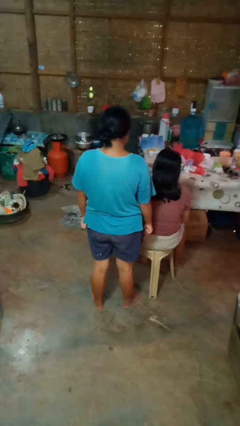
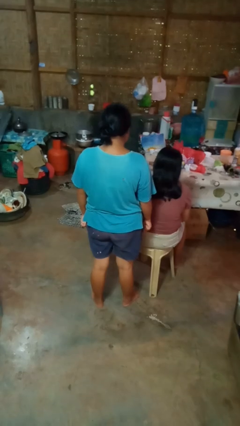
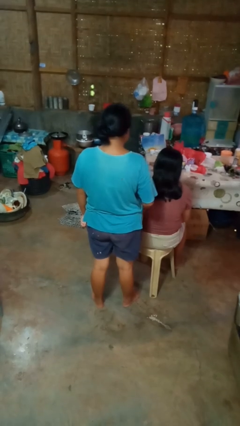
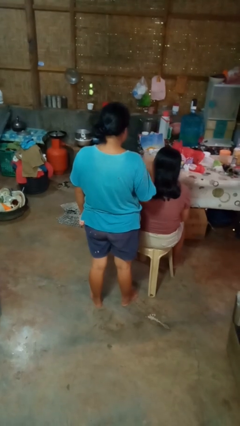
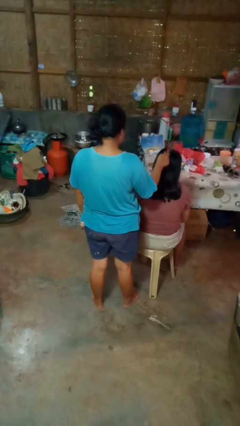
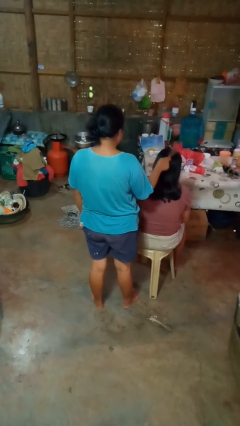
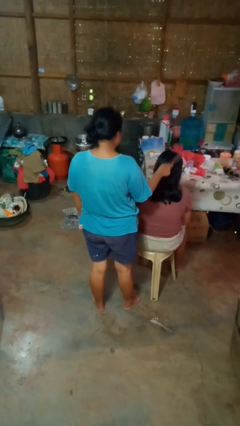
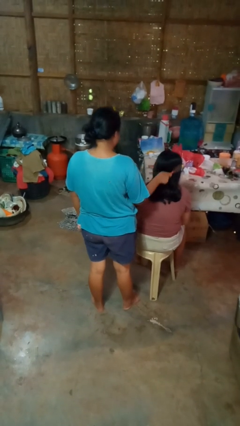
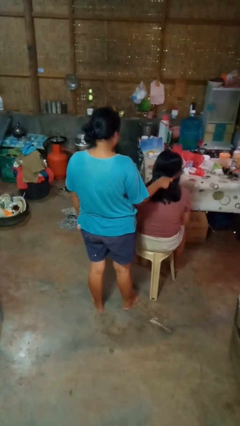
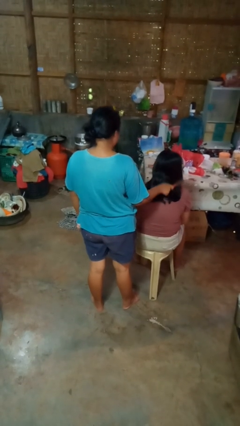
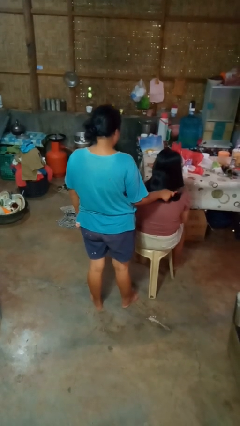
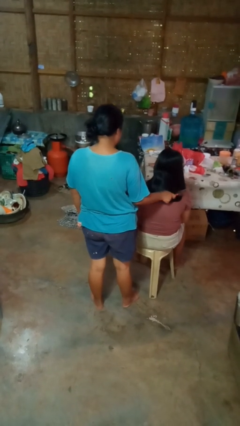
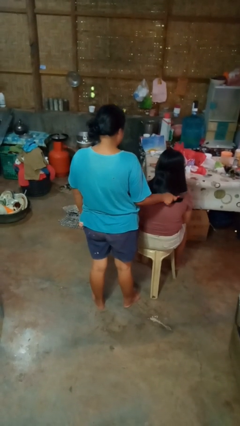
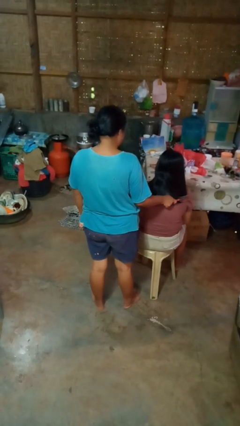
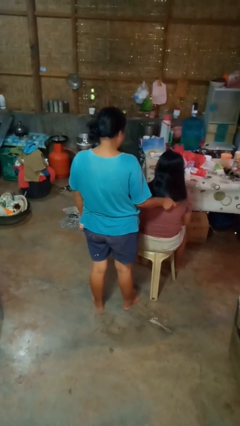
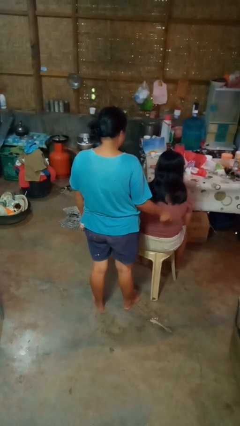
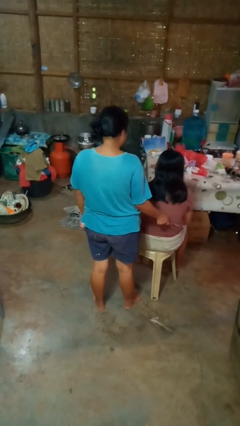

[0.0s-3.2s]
person brushes hair of person

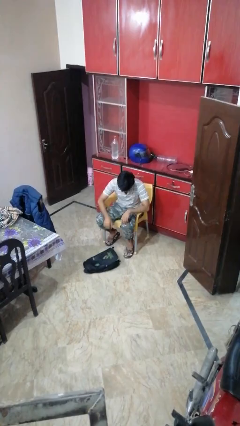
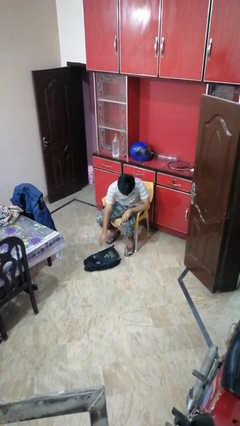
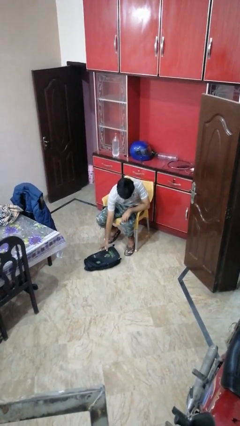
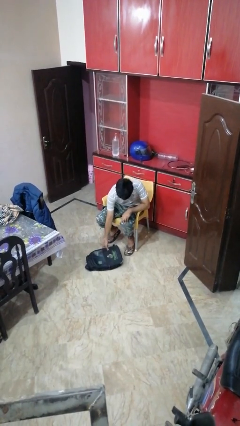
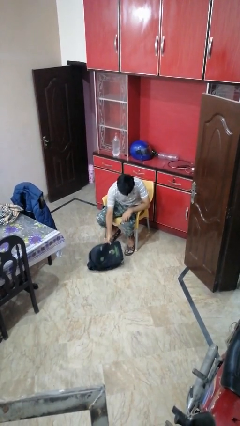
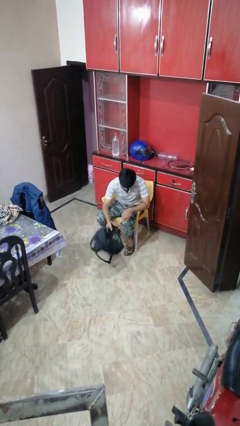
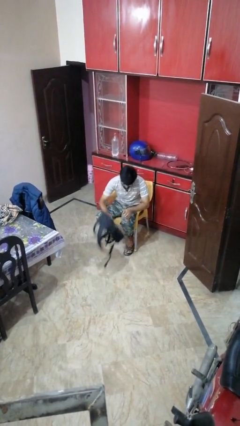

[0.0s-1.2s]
person picks up object from floor

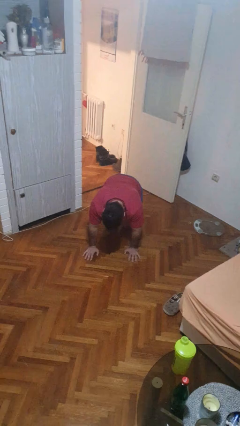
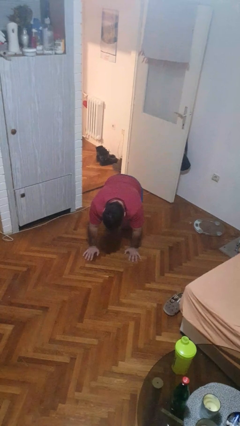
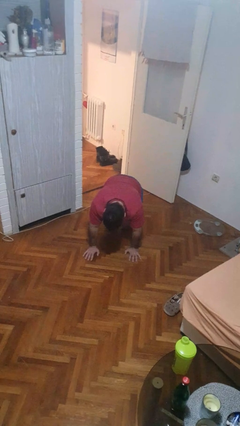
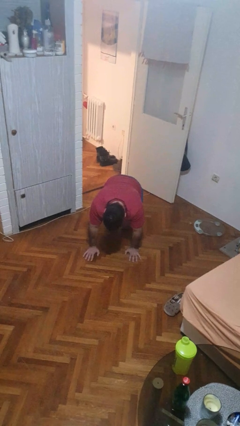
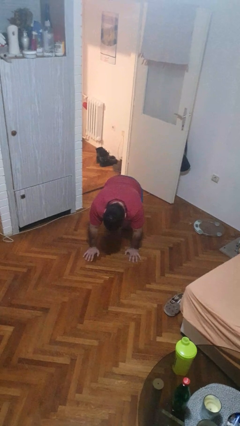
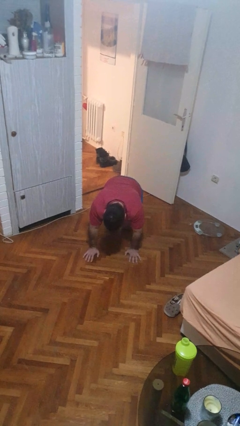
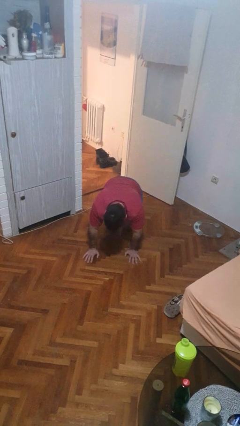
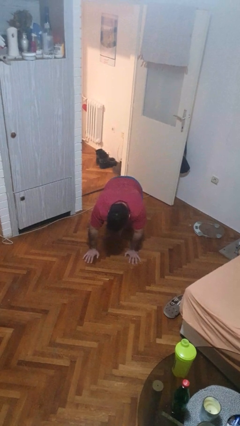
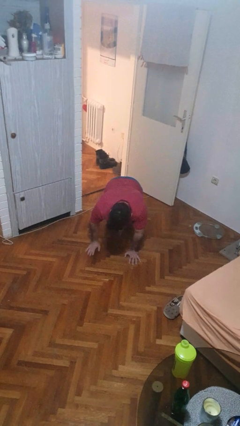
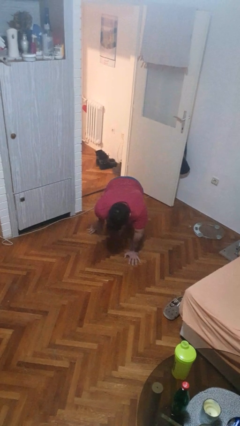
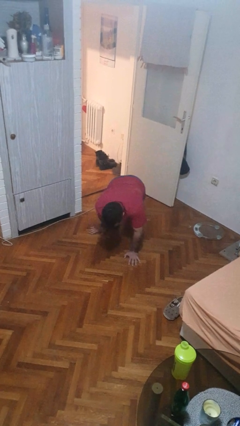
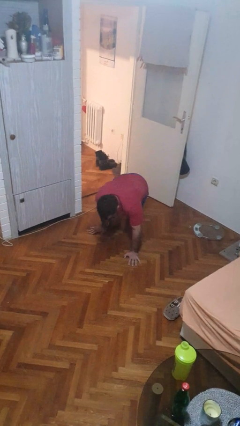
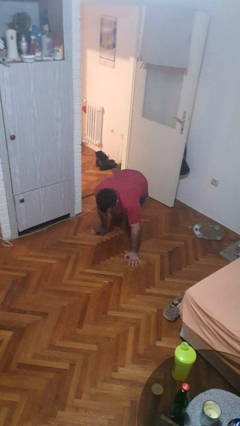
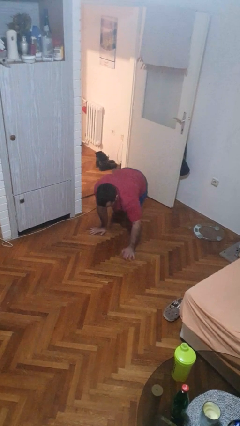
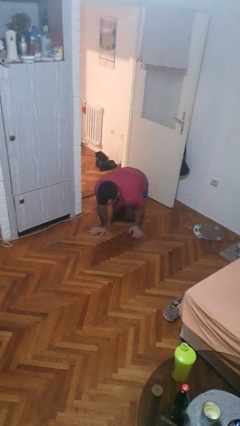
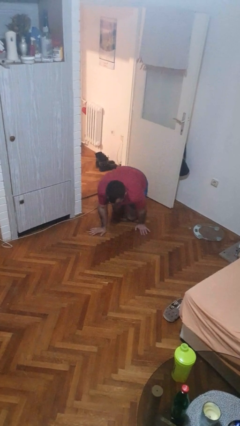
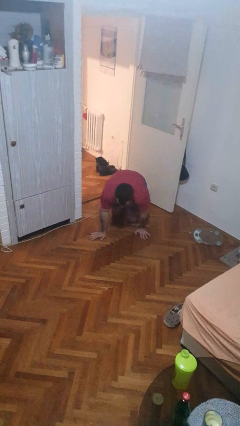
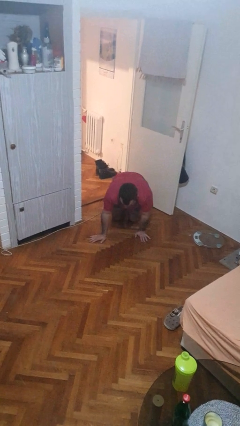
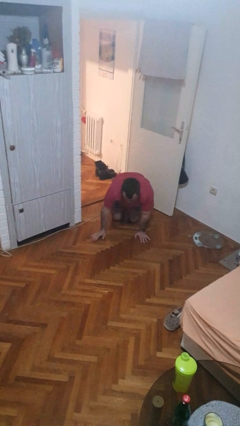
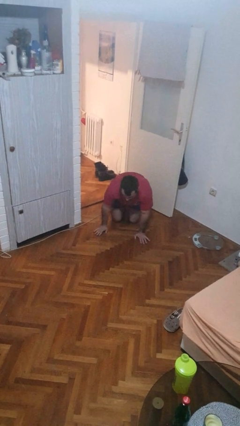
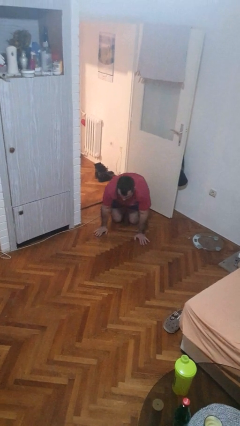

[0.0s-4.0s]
person crawls

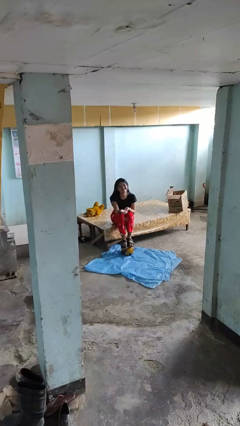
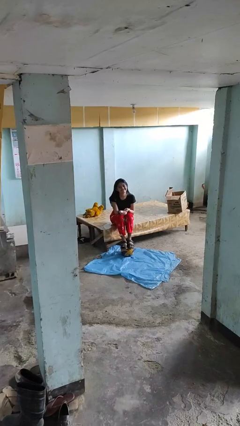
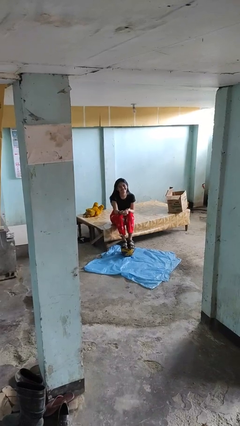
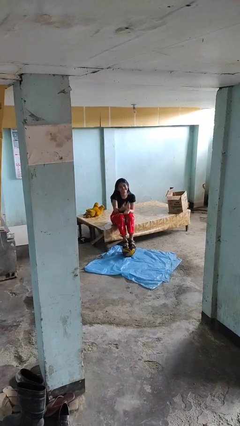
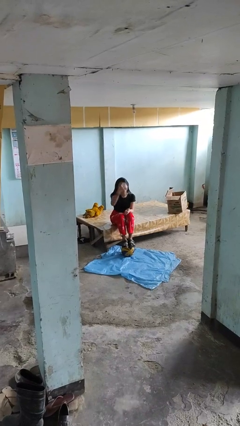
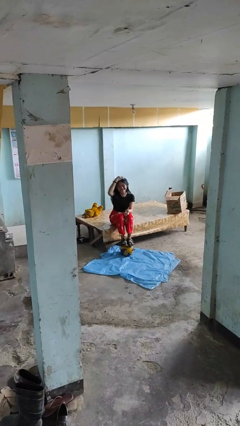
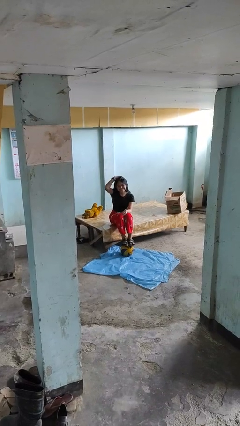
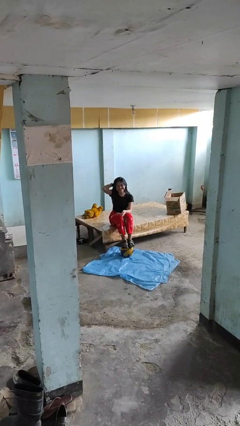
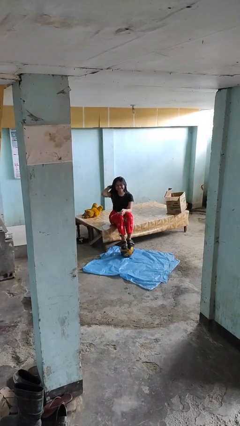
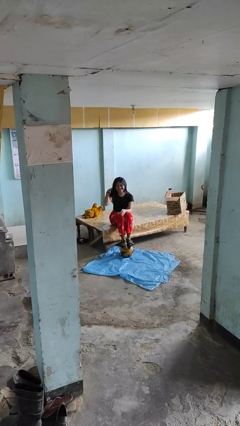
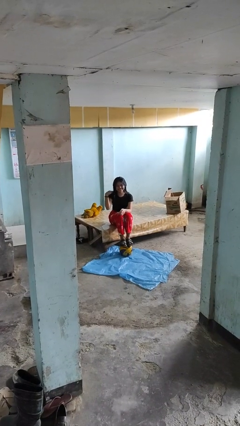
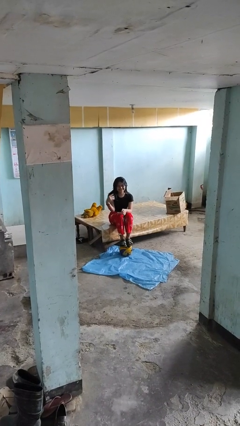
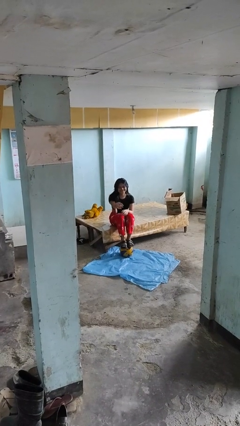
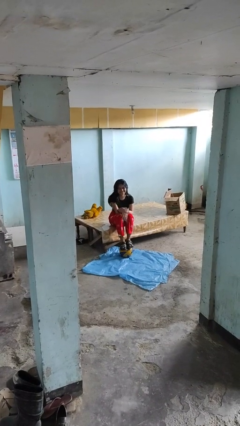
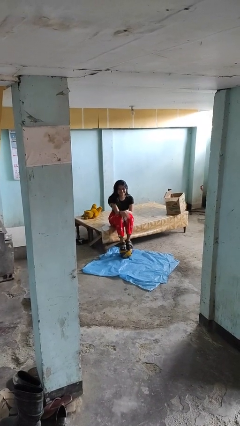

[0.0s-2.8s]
person strokes hair

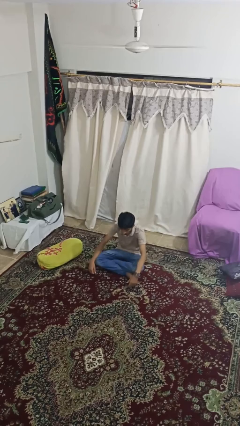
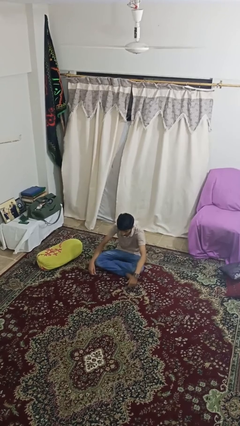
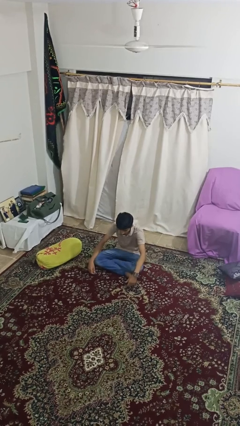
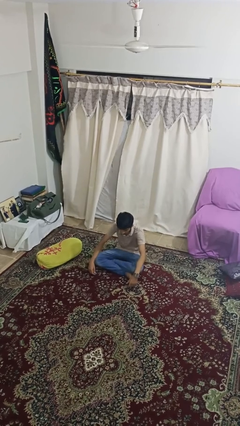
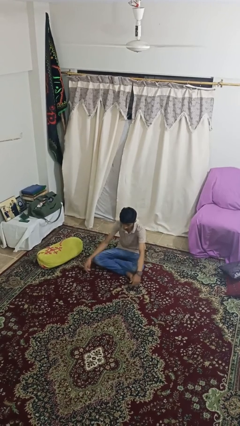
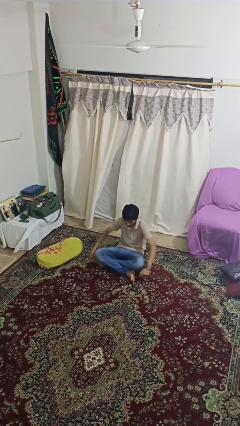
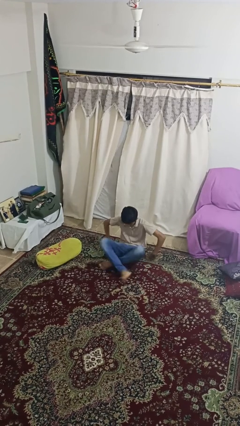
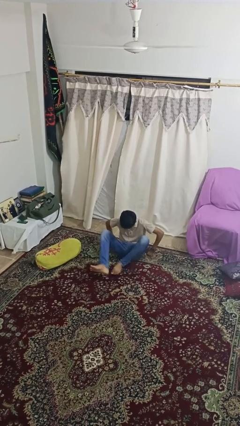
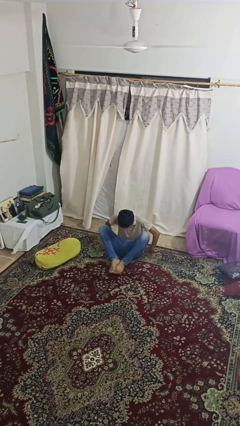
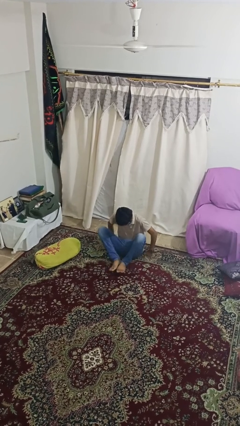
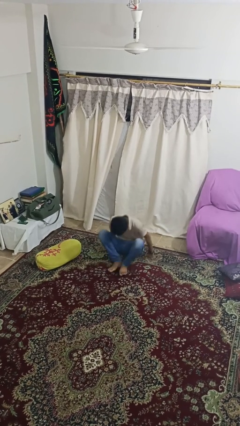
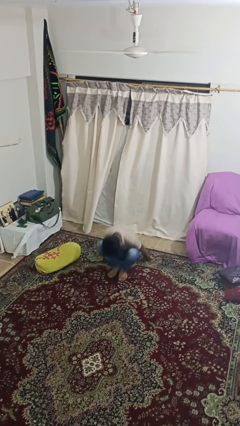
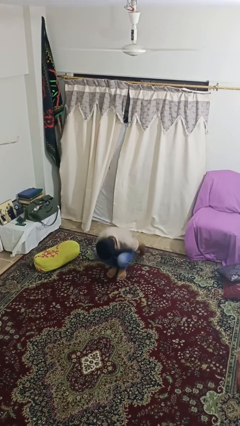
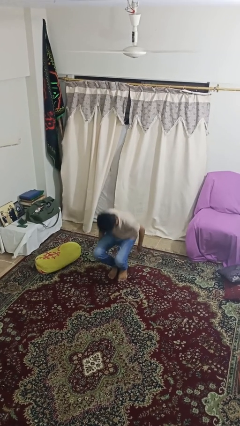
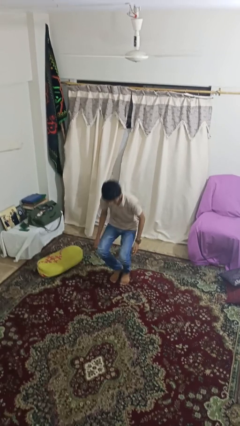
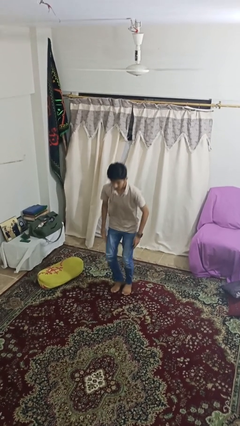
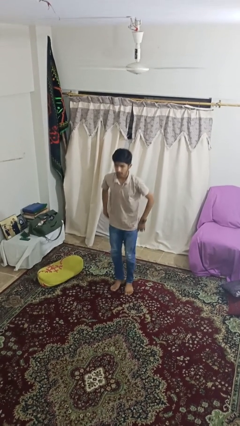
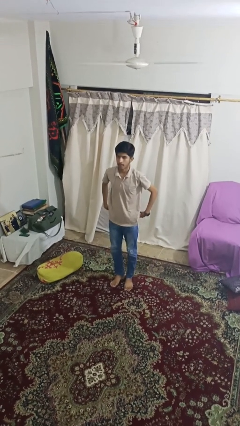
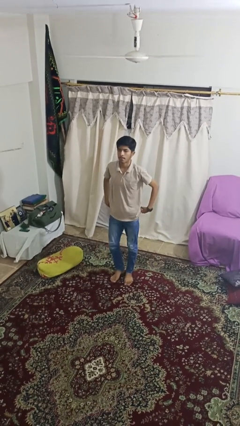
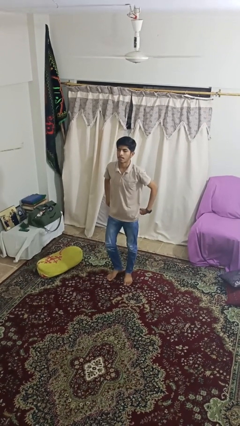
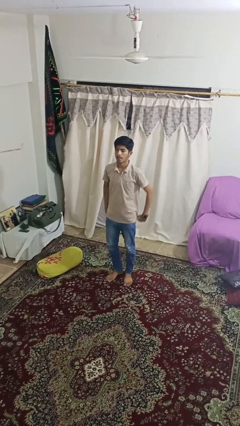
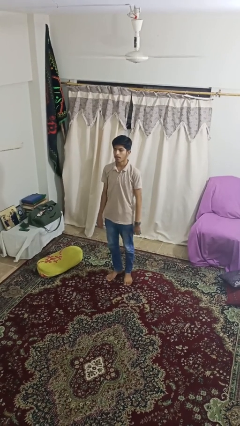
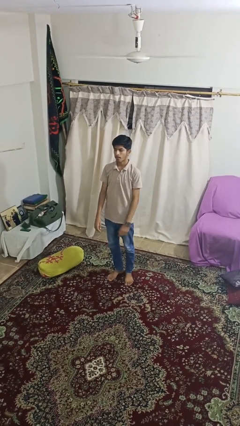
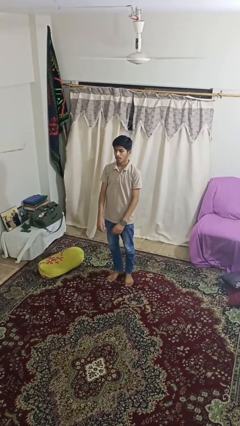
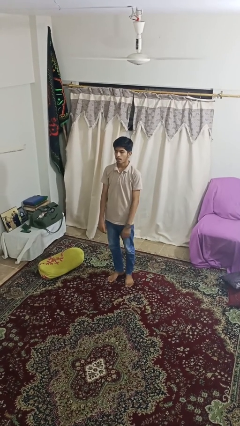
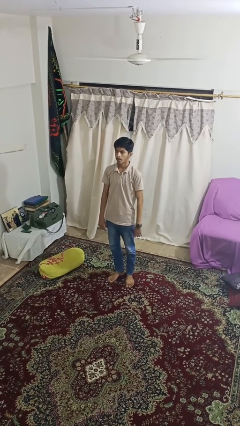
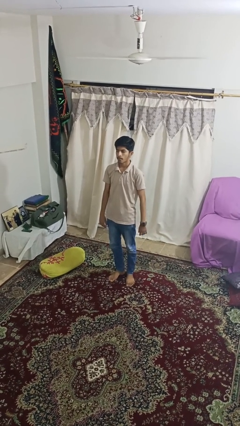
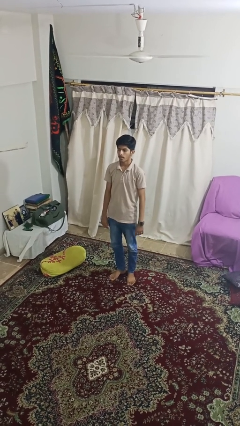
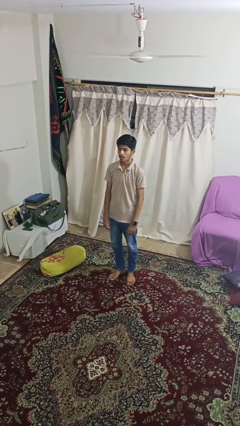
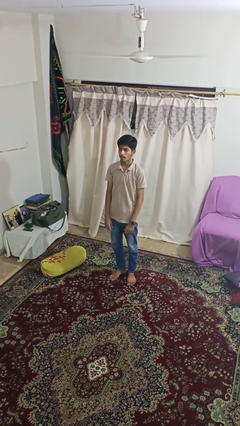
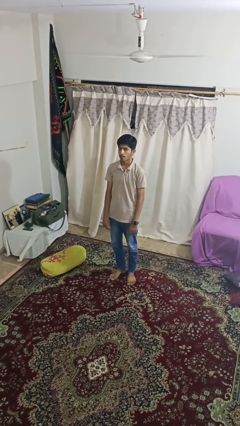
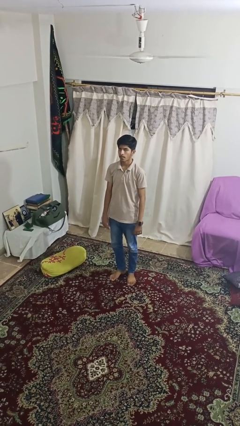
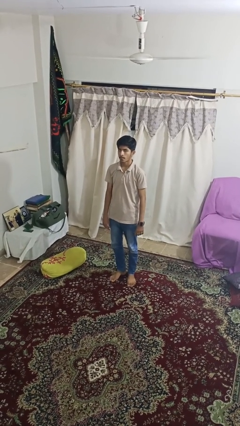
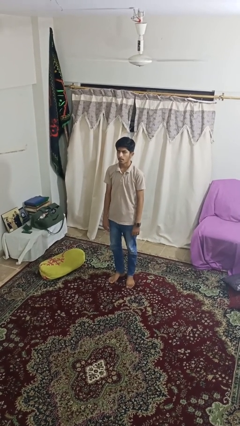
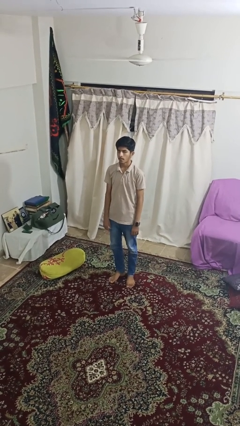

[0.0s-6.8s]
person stands up from floor
